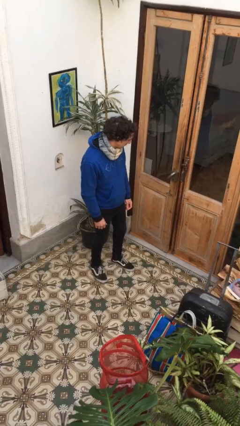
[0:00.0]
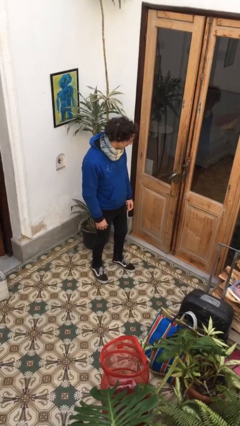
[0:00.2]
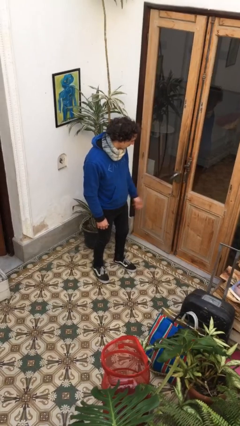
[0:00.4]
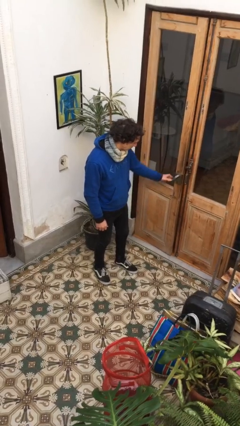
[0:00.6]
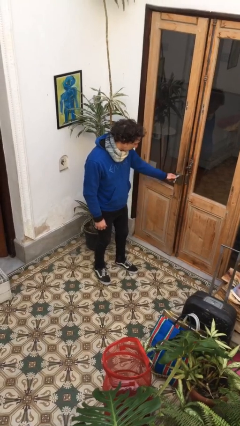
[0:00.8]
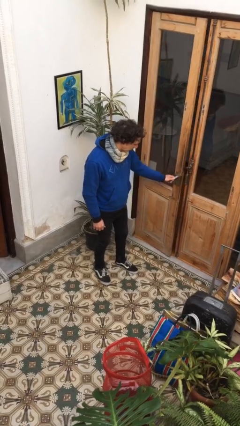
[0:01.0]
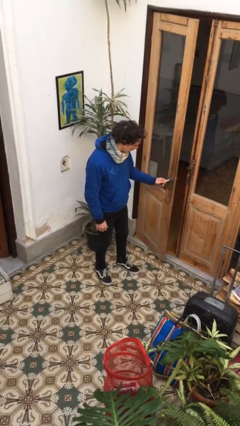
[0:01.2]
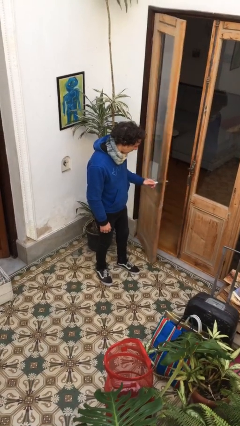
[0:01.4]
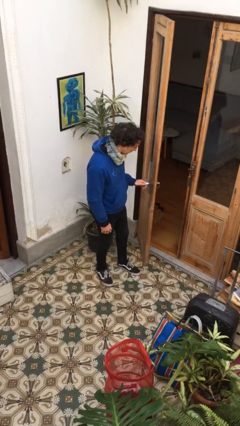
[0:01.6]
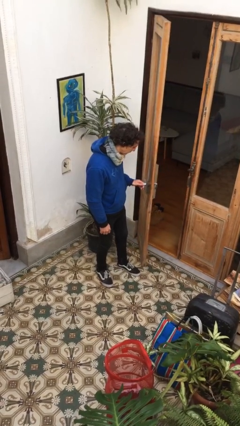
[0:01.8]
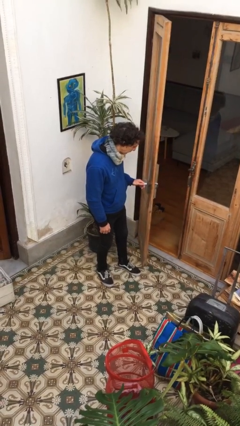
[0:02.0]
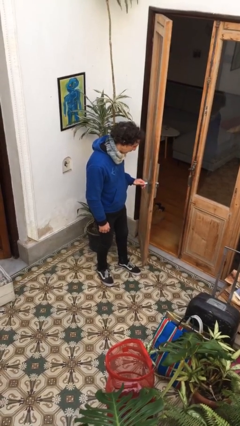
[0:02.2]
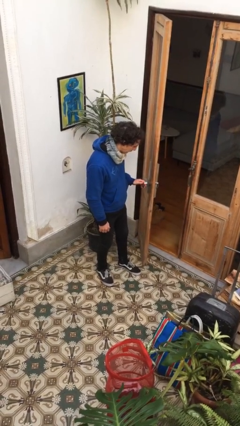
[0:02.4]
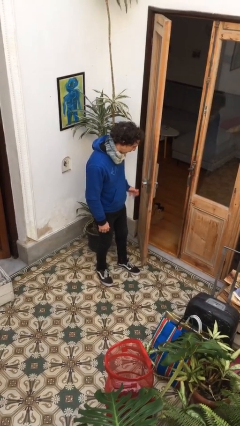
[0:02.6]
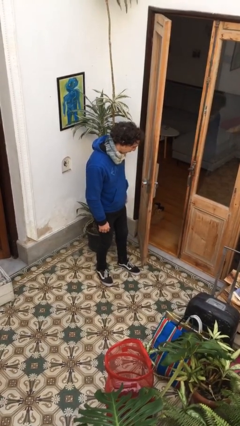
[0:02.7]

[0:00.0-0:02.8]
person opens facility door

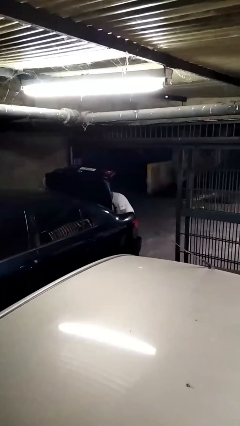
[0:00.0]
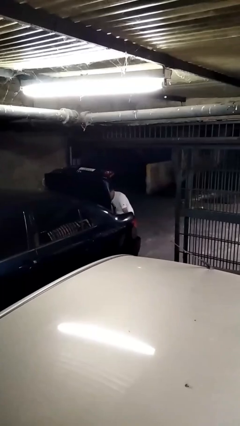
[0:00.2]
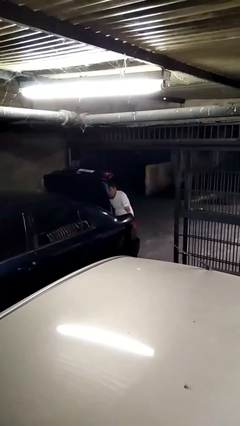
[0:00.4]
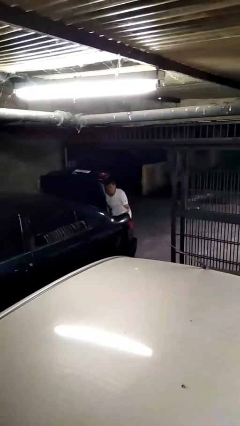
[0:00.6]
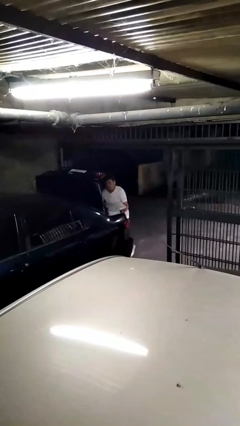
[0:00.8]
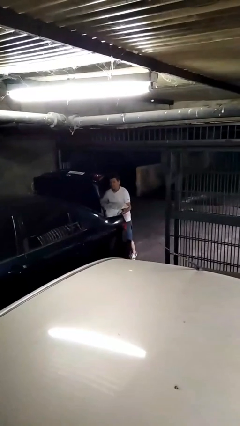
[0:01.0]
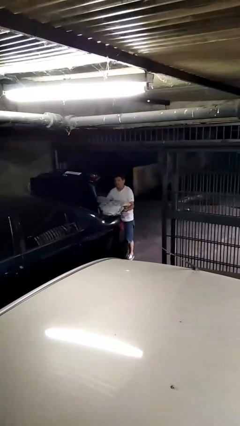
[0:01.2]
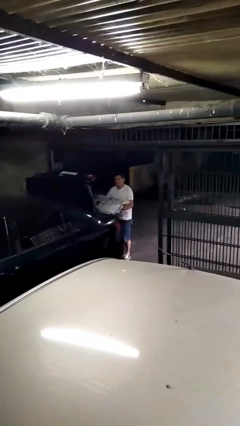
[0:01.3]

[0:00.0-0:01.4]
person unloads car

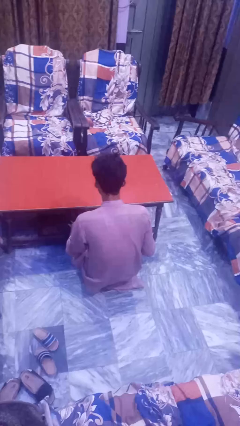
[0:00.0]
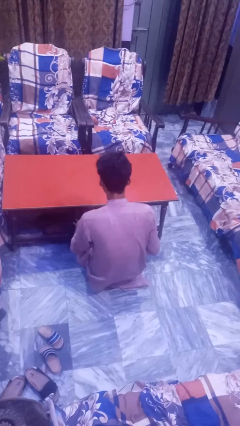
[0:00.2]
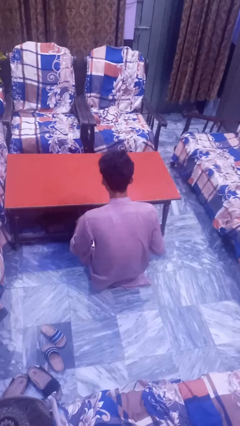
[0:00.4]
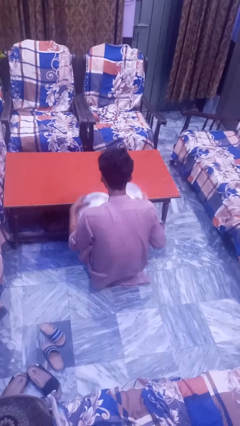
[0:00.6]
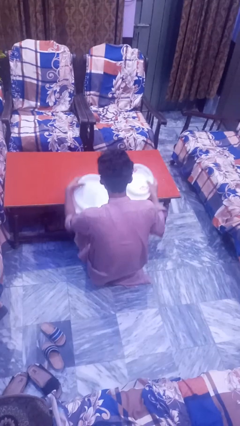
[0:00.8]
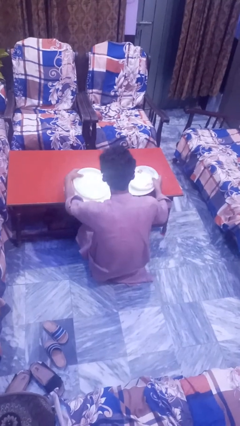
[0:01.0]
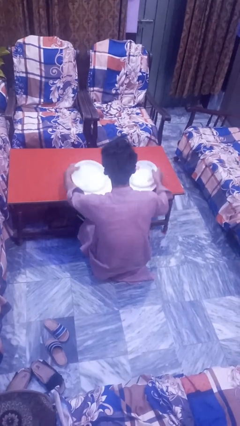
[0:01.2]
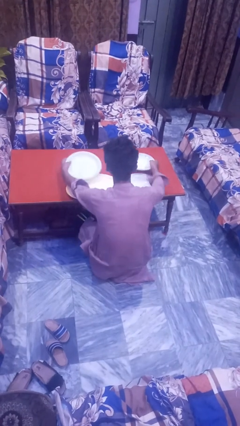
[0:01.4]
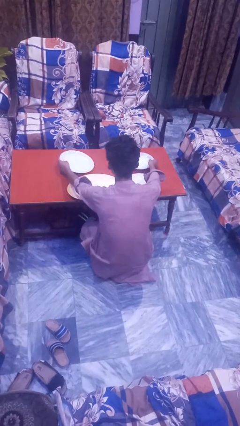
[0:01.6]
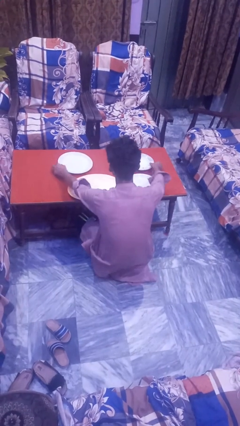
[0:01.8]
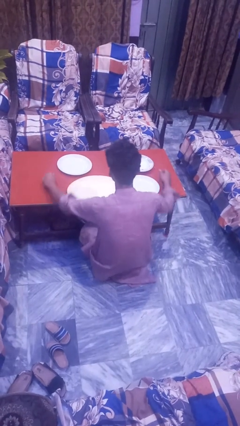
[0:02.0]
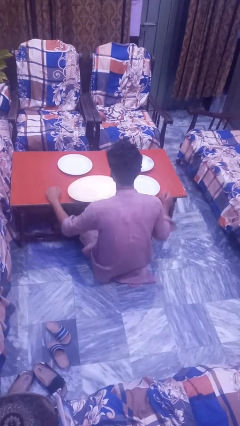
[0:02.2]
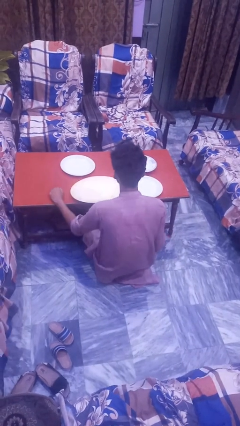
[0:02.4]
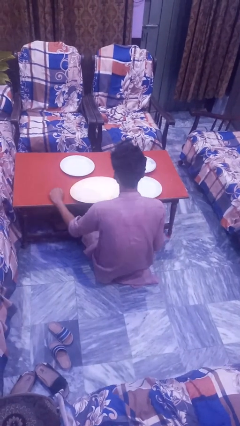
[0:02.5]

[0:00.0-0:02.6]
person sets table

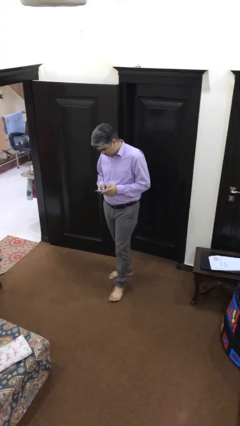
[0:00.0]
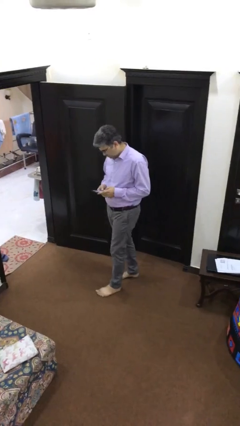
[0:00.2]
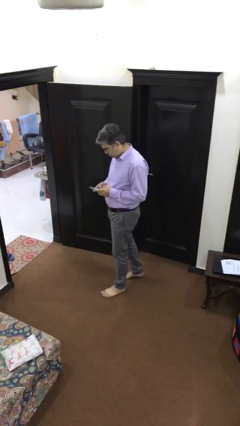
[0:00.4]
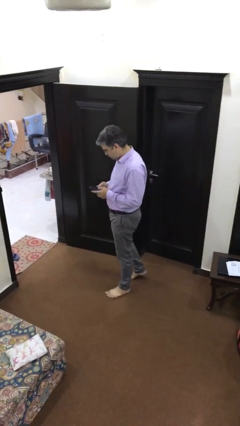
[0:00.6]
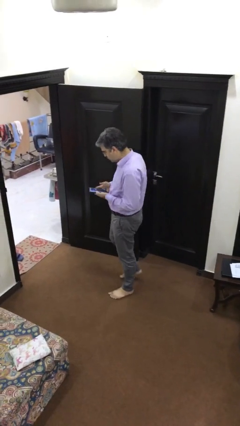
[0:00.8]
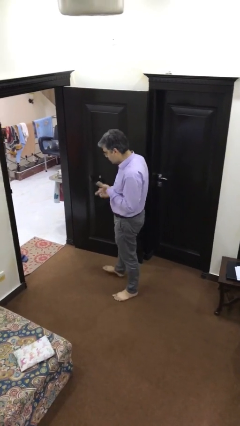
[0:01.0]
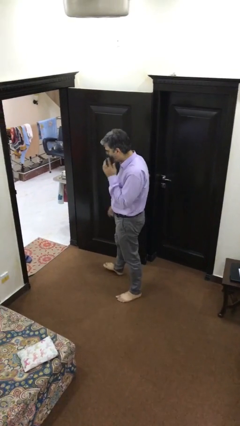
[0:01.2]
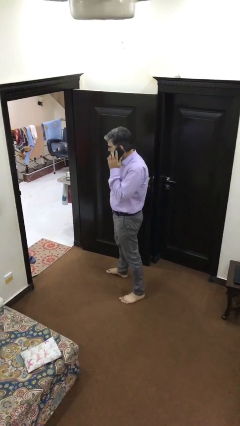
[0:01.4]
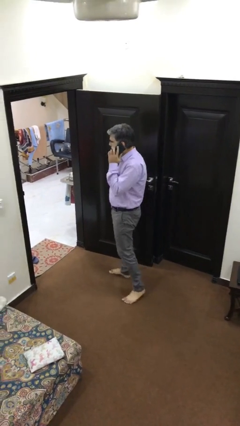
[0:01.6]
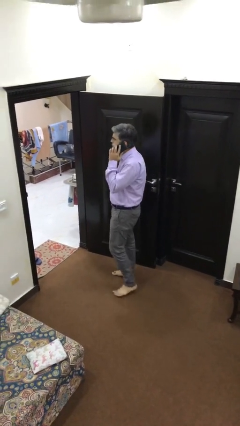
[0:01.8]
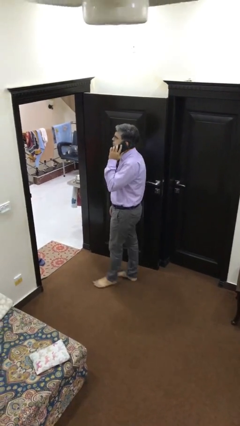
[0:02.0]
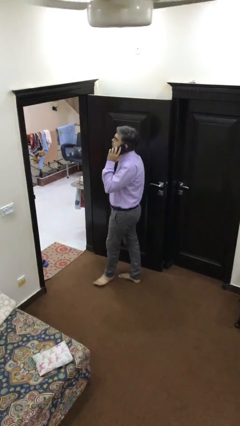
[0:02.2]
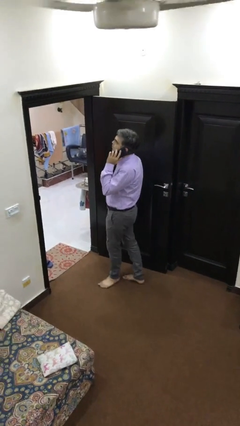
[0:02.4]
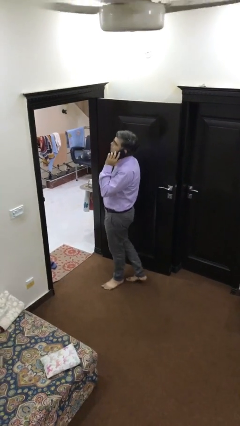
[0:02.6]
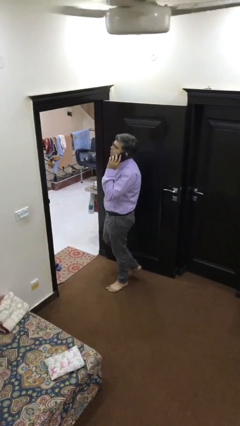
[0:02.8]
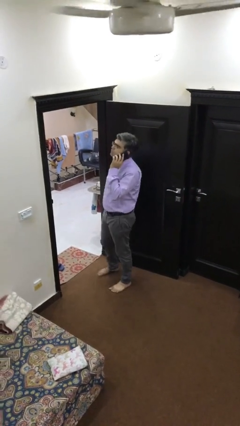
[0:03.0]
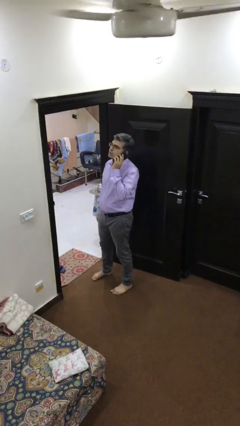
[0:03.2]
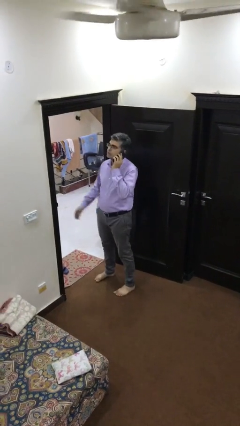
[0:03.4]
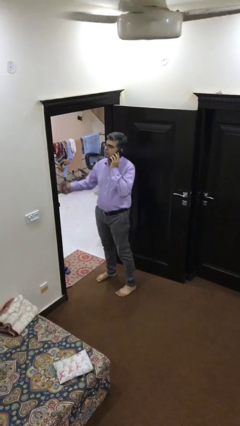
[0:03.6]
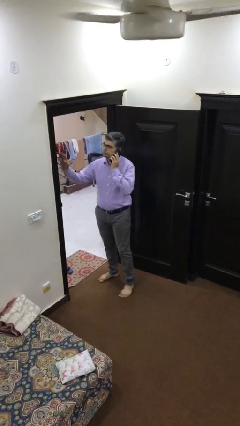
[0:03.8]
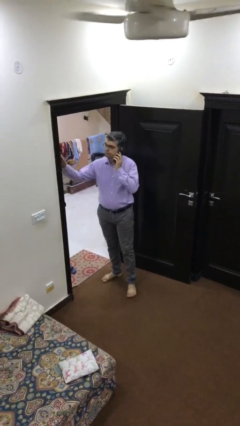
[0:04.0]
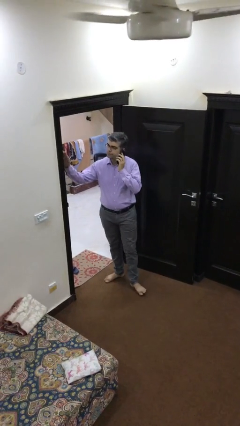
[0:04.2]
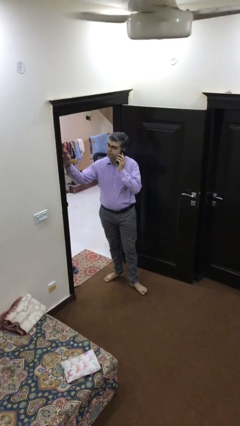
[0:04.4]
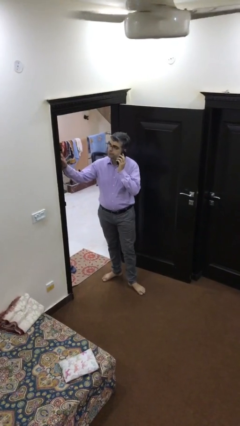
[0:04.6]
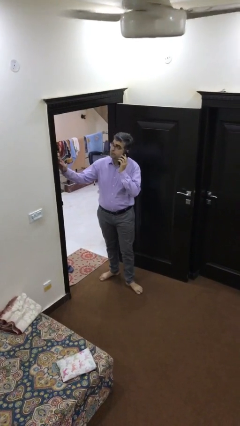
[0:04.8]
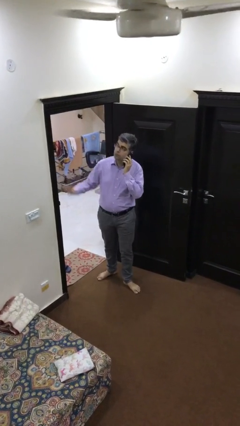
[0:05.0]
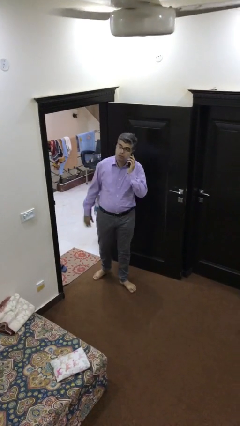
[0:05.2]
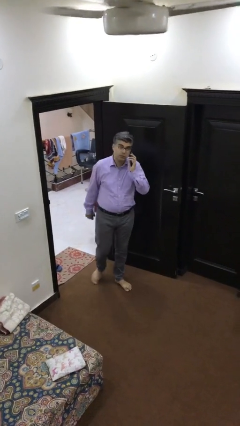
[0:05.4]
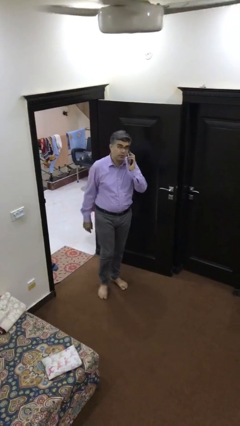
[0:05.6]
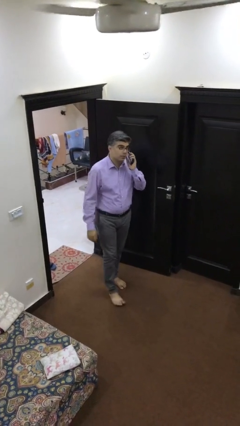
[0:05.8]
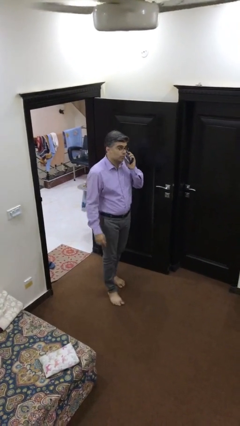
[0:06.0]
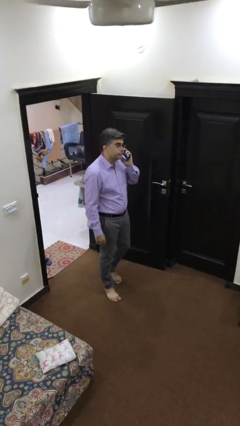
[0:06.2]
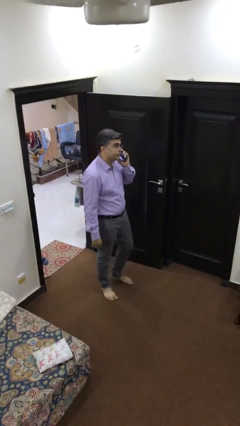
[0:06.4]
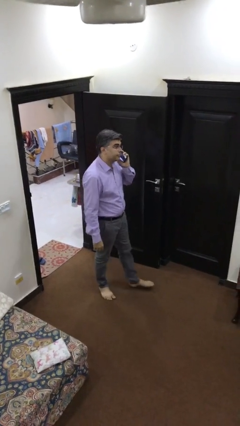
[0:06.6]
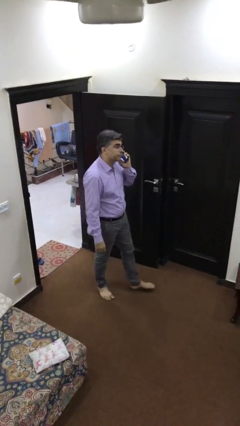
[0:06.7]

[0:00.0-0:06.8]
person talks on phone

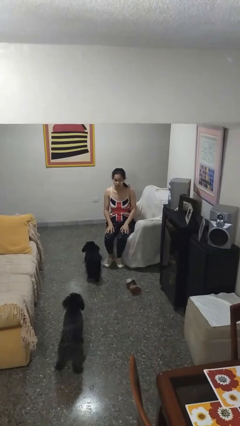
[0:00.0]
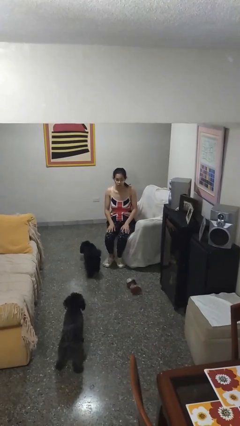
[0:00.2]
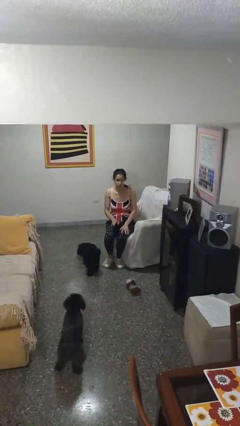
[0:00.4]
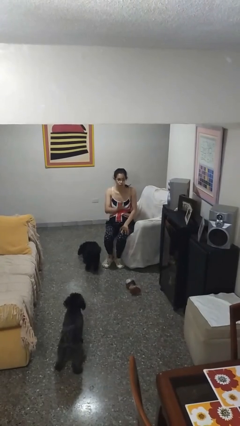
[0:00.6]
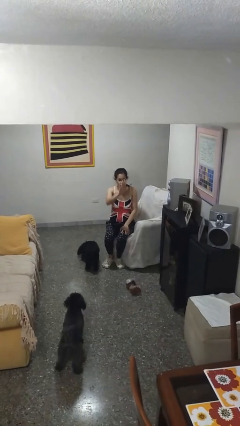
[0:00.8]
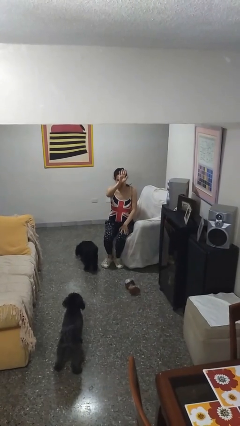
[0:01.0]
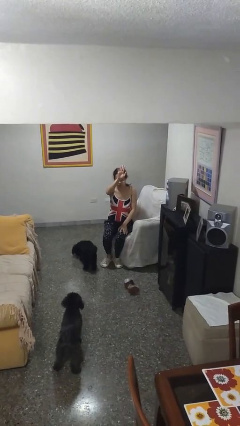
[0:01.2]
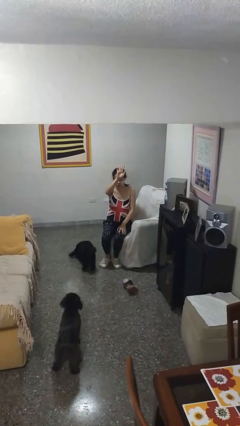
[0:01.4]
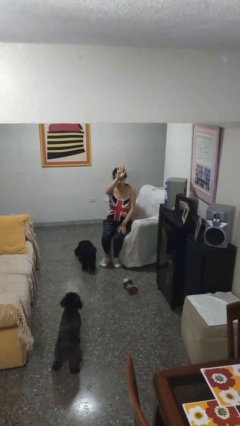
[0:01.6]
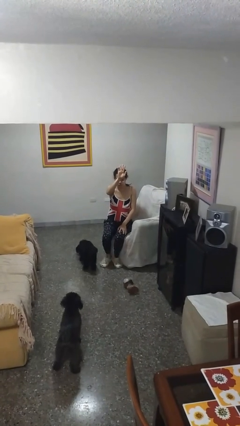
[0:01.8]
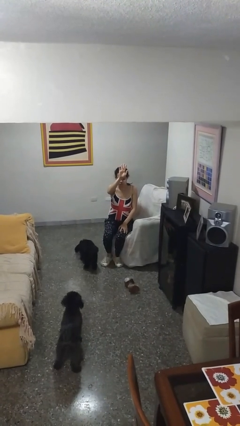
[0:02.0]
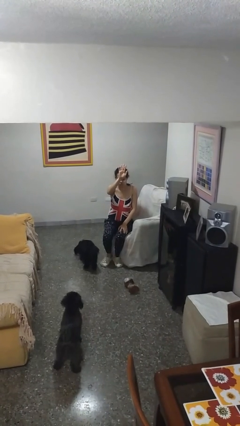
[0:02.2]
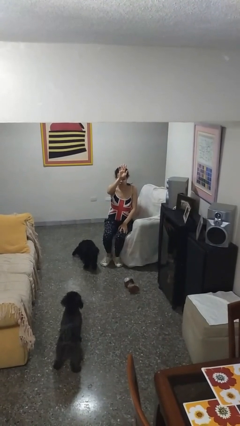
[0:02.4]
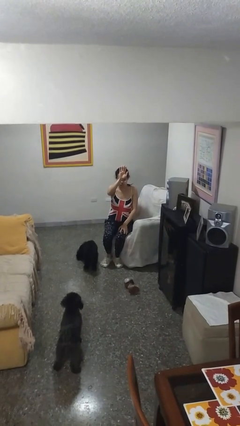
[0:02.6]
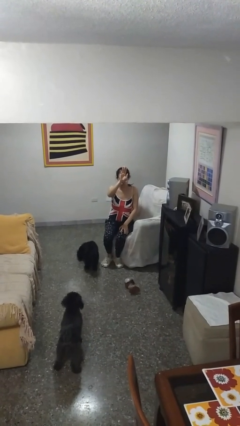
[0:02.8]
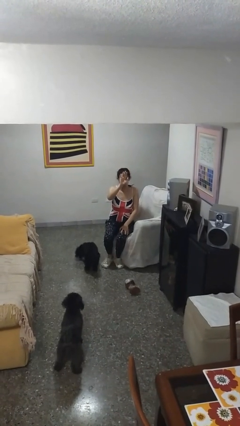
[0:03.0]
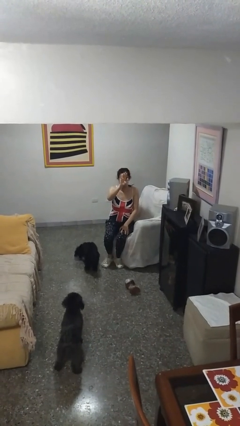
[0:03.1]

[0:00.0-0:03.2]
person gestures raise hand

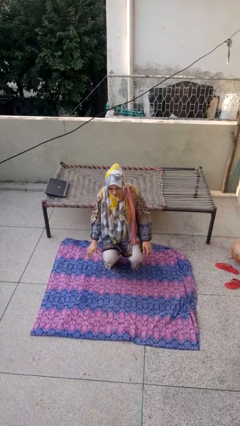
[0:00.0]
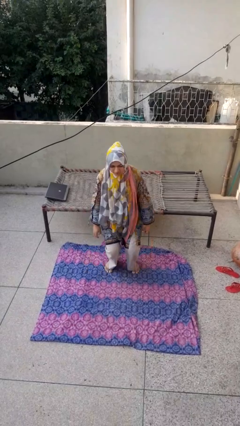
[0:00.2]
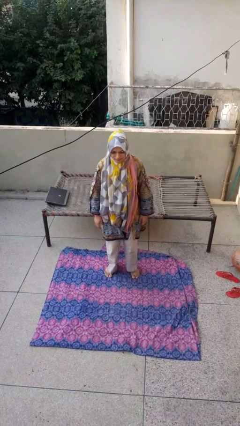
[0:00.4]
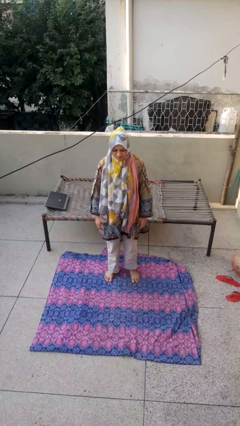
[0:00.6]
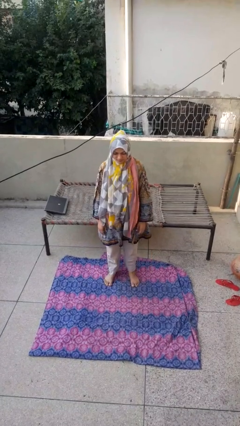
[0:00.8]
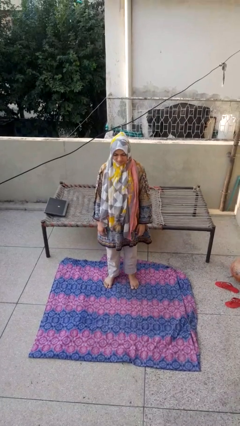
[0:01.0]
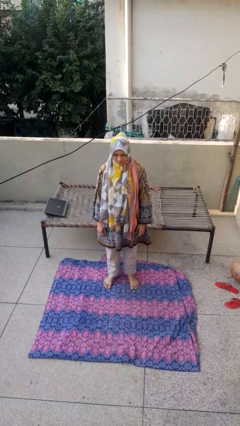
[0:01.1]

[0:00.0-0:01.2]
person stands up
